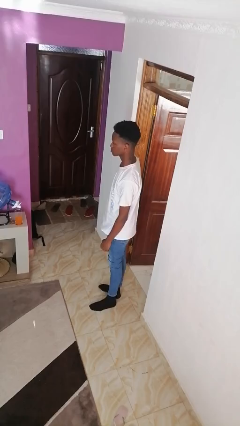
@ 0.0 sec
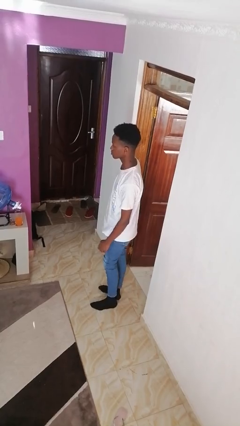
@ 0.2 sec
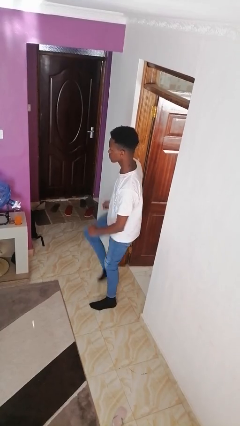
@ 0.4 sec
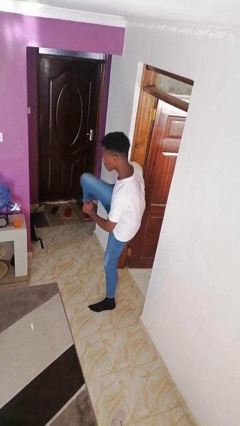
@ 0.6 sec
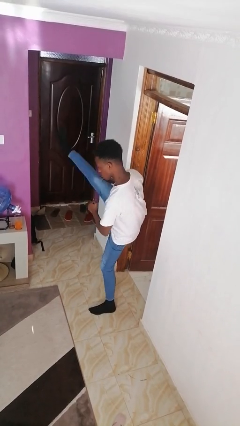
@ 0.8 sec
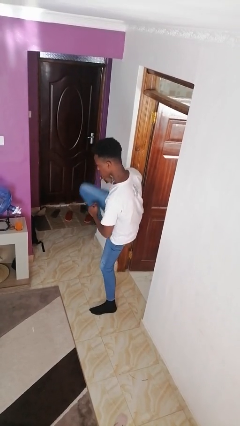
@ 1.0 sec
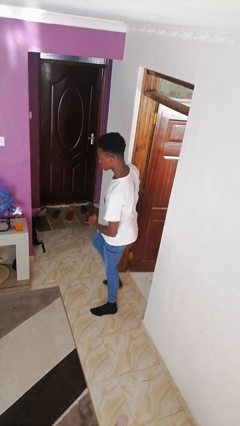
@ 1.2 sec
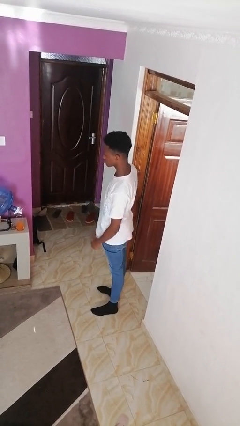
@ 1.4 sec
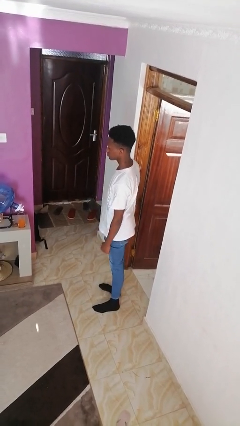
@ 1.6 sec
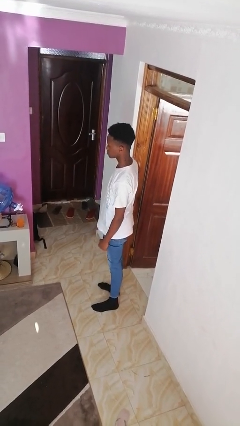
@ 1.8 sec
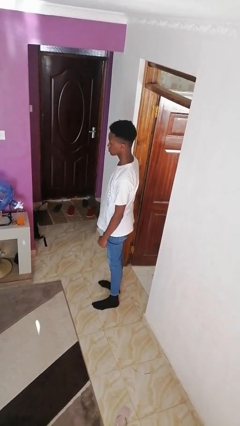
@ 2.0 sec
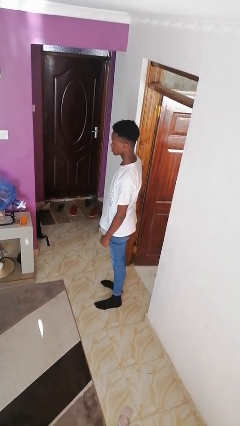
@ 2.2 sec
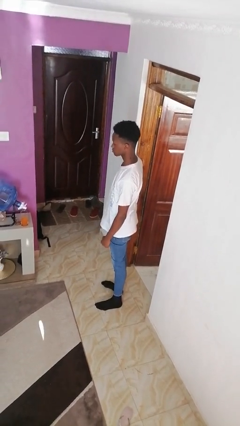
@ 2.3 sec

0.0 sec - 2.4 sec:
person karate kicks

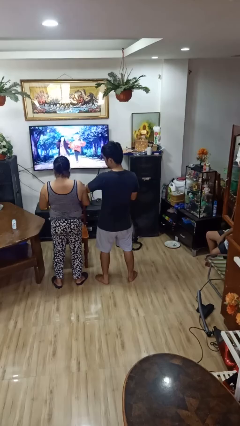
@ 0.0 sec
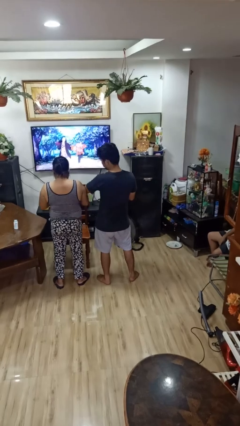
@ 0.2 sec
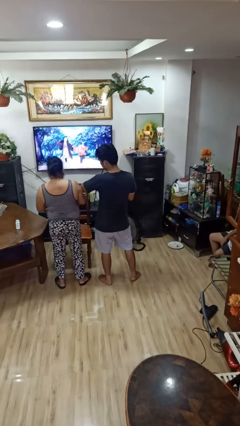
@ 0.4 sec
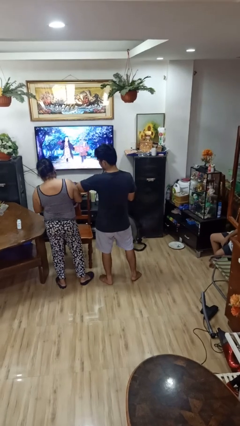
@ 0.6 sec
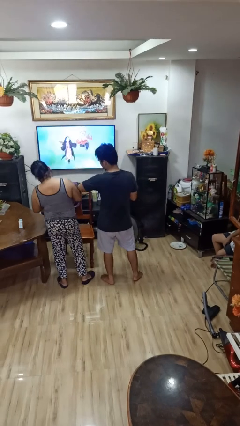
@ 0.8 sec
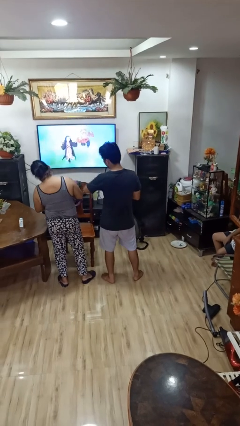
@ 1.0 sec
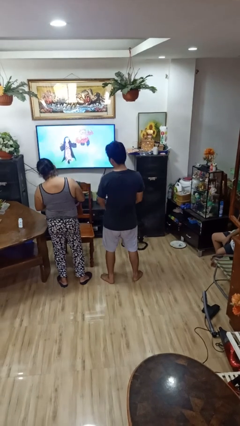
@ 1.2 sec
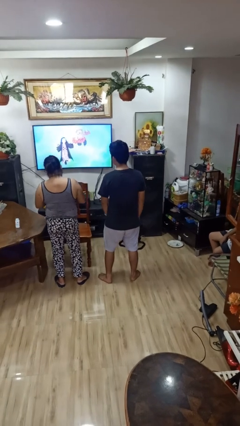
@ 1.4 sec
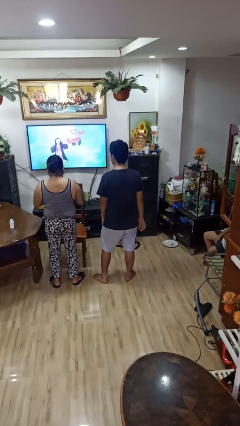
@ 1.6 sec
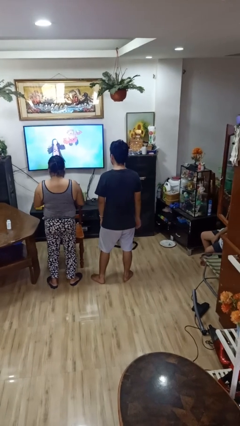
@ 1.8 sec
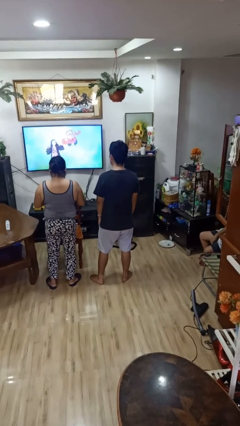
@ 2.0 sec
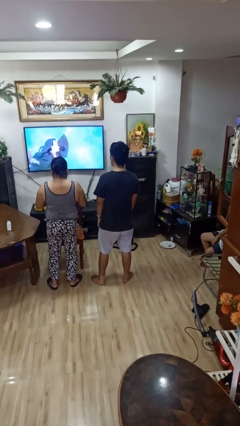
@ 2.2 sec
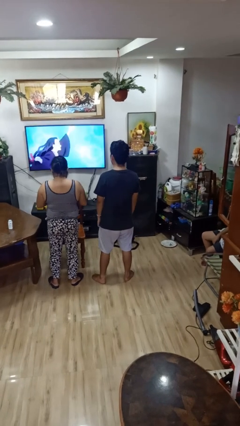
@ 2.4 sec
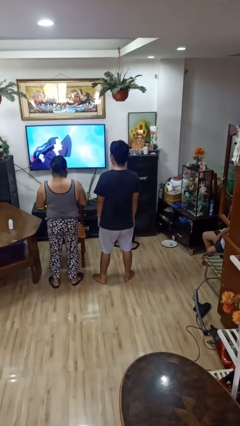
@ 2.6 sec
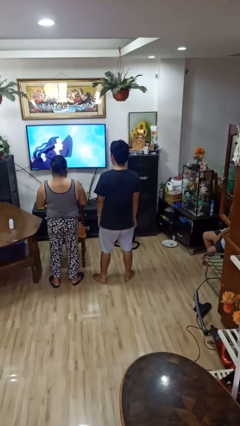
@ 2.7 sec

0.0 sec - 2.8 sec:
person shoves person

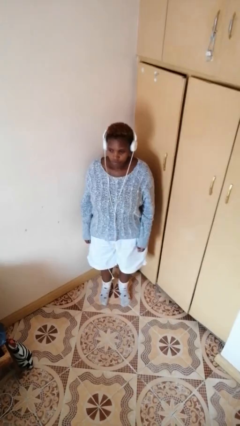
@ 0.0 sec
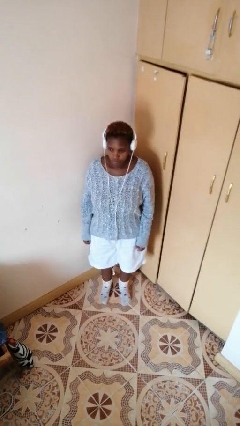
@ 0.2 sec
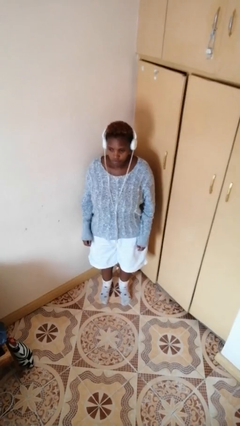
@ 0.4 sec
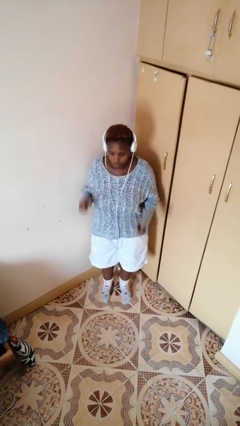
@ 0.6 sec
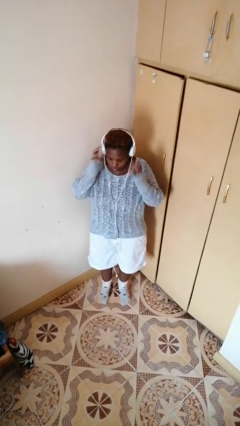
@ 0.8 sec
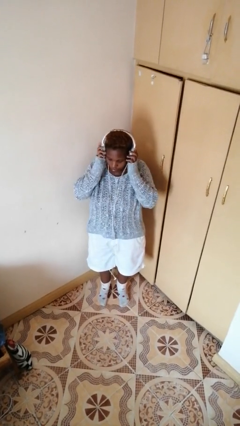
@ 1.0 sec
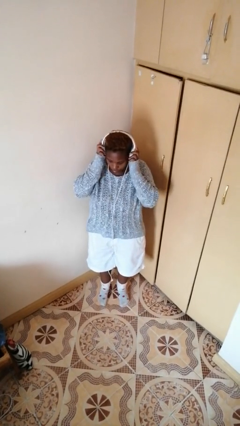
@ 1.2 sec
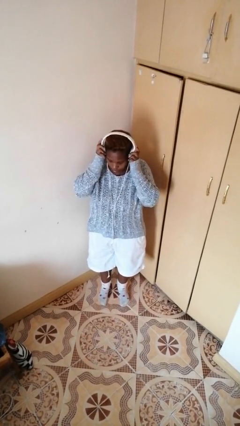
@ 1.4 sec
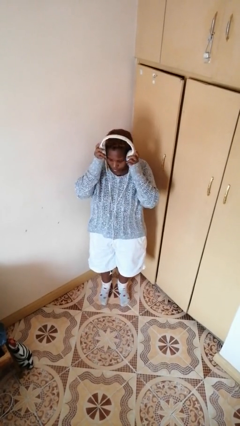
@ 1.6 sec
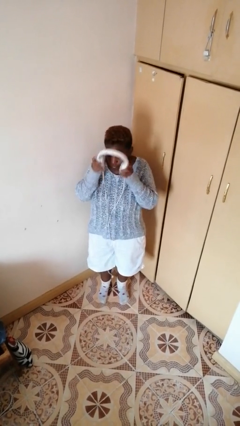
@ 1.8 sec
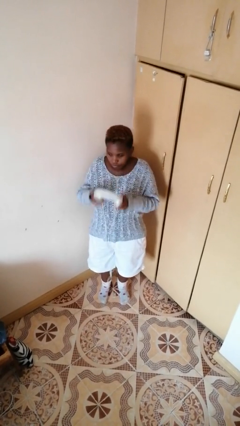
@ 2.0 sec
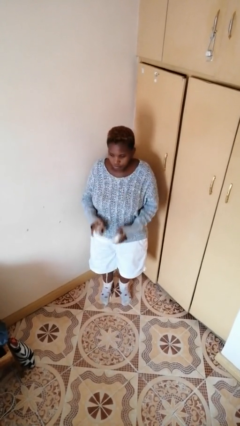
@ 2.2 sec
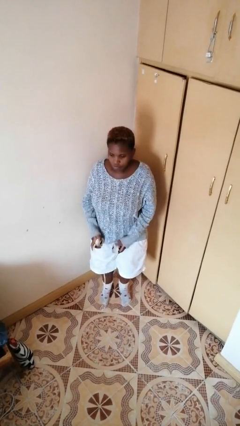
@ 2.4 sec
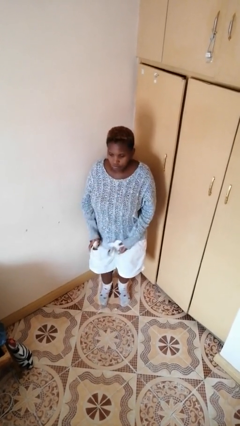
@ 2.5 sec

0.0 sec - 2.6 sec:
person takes off headphones

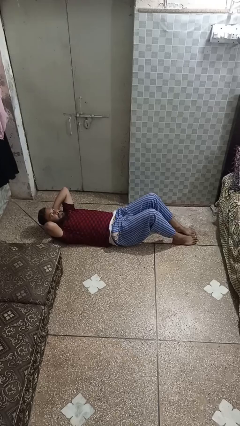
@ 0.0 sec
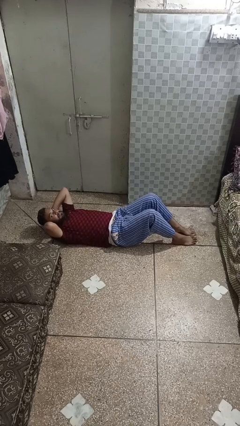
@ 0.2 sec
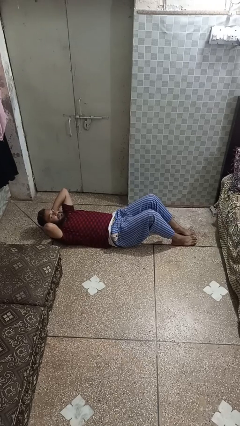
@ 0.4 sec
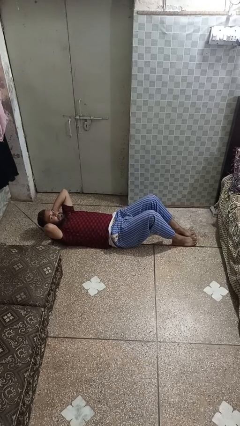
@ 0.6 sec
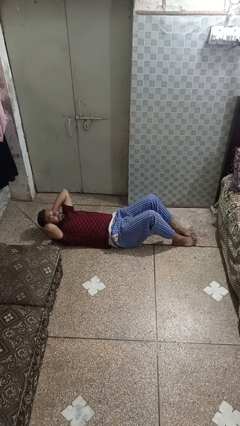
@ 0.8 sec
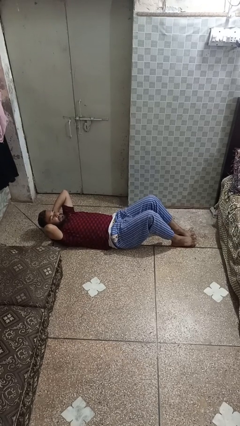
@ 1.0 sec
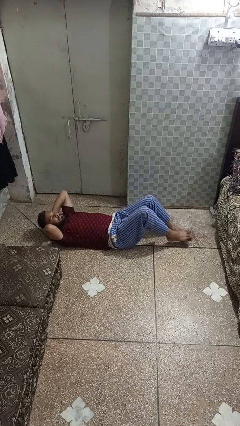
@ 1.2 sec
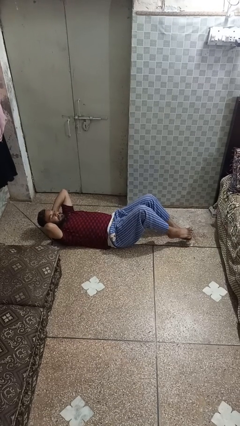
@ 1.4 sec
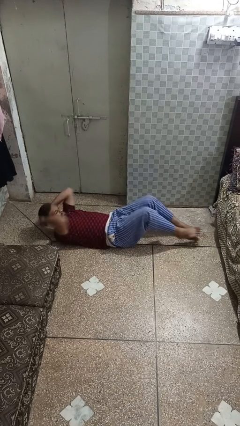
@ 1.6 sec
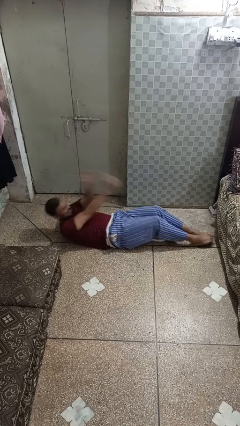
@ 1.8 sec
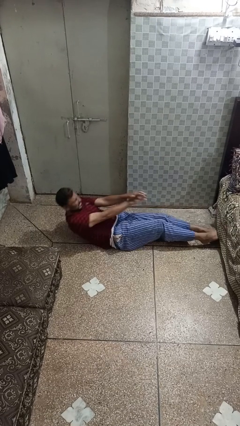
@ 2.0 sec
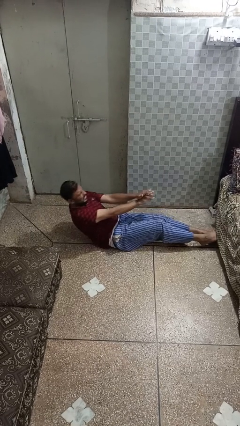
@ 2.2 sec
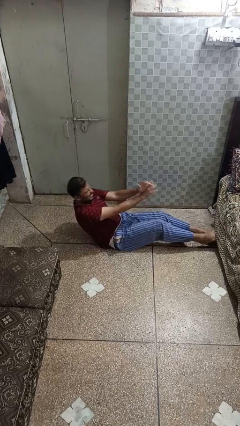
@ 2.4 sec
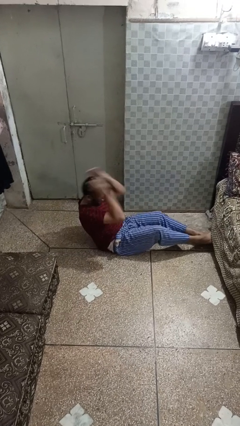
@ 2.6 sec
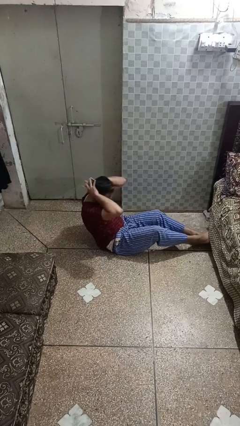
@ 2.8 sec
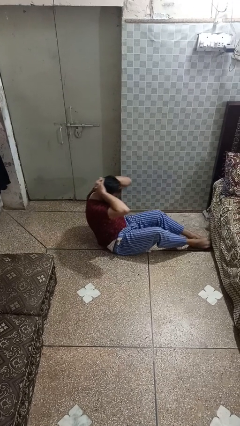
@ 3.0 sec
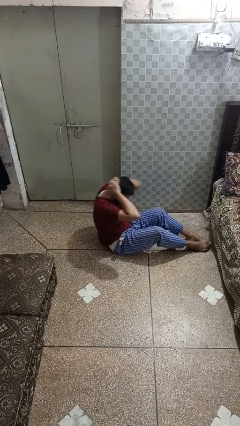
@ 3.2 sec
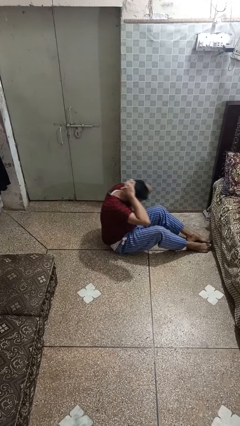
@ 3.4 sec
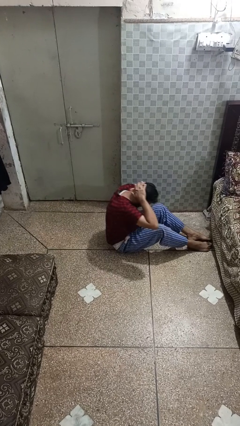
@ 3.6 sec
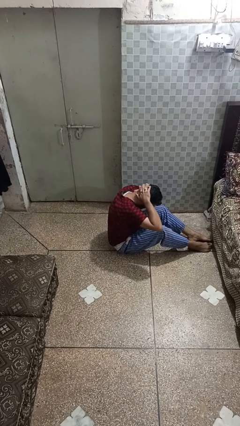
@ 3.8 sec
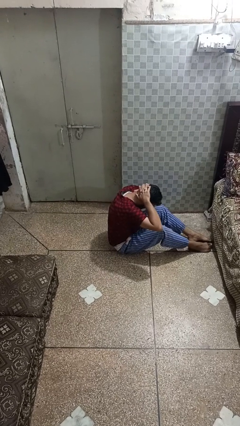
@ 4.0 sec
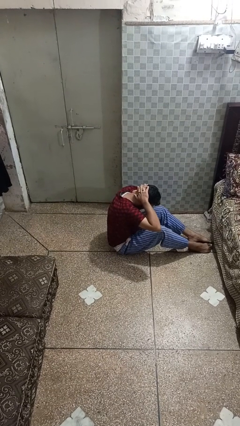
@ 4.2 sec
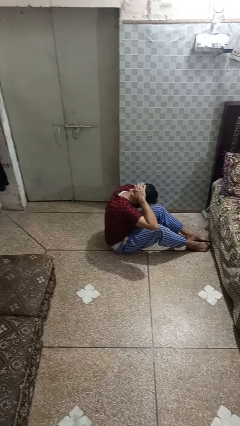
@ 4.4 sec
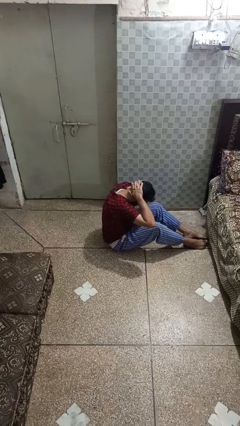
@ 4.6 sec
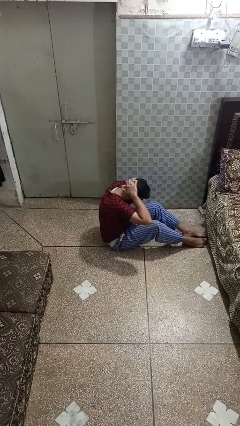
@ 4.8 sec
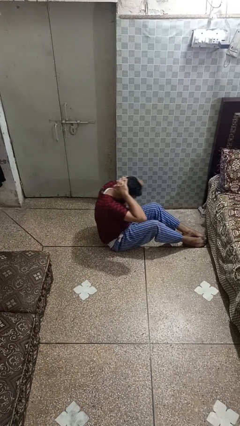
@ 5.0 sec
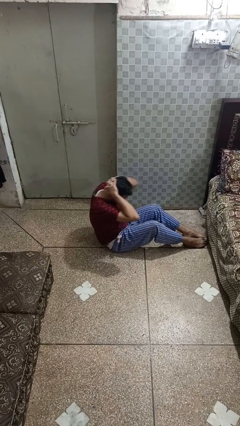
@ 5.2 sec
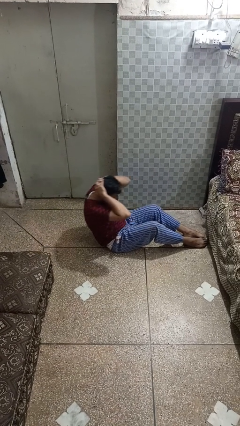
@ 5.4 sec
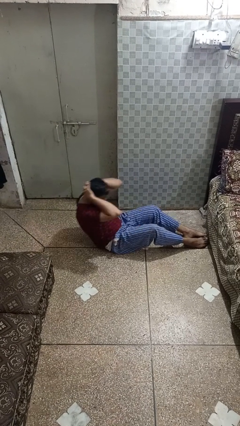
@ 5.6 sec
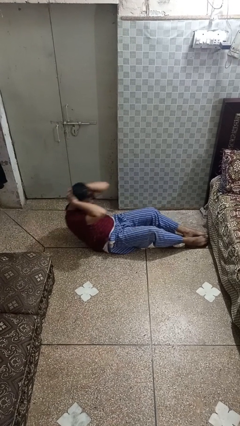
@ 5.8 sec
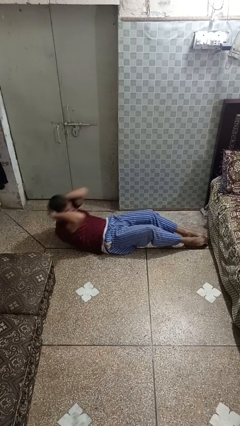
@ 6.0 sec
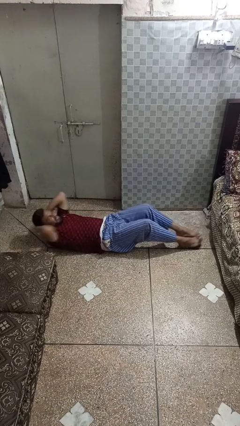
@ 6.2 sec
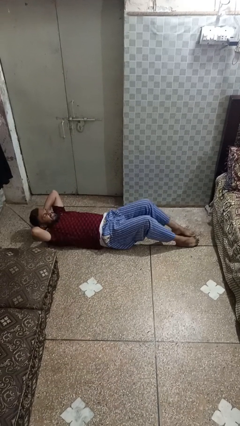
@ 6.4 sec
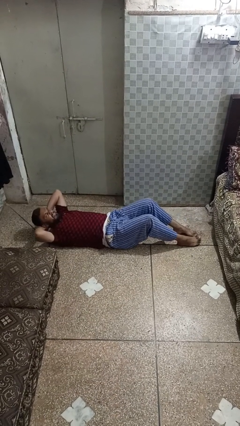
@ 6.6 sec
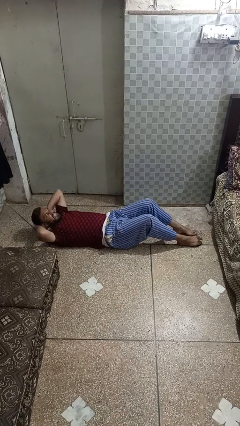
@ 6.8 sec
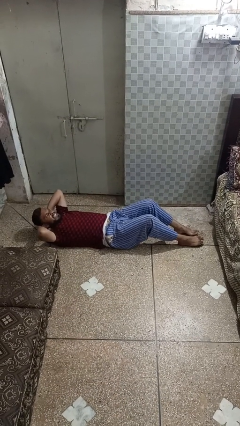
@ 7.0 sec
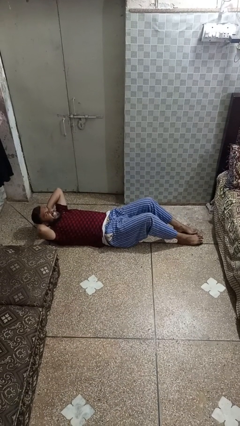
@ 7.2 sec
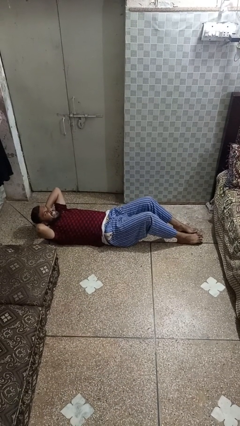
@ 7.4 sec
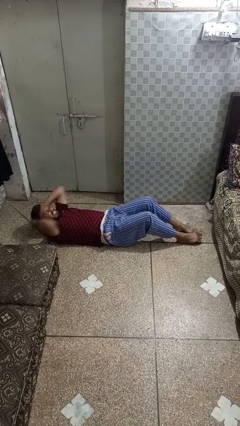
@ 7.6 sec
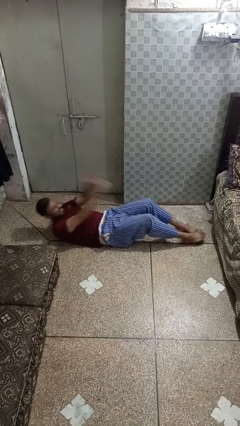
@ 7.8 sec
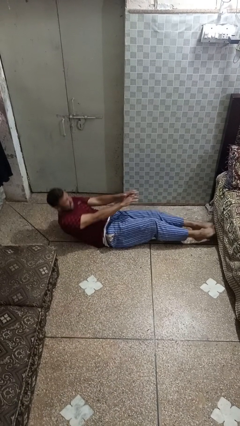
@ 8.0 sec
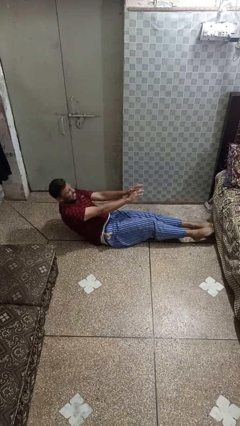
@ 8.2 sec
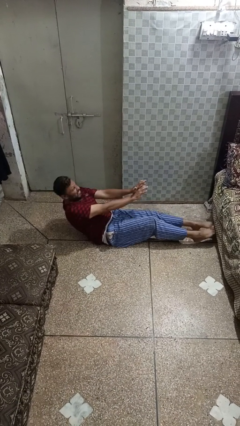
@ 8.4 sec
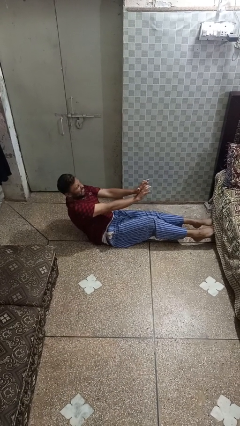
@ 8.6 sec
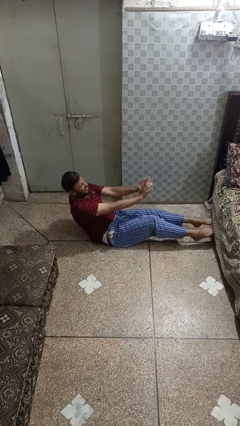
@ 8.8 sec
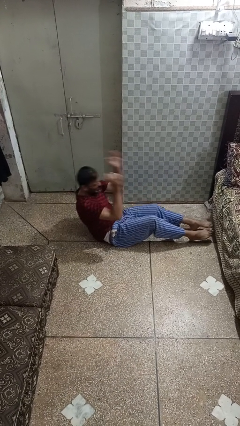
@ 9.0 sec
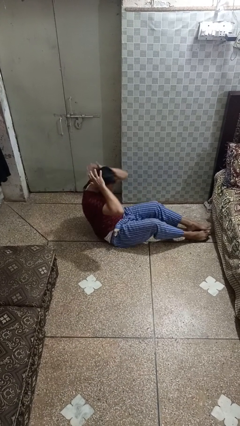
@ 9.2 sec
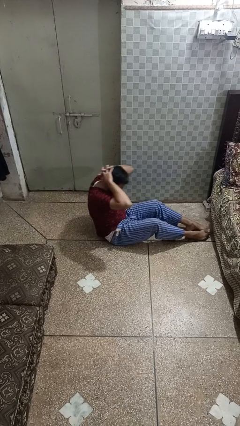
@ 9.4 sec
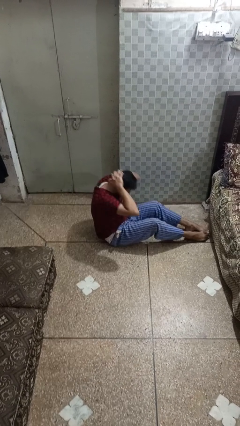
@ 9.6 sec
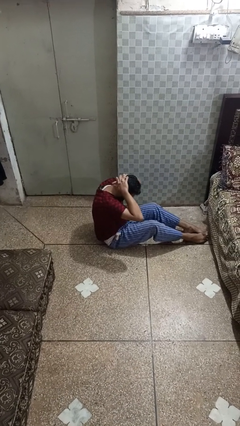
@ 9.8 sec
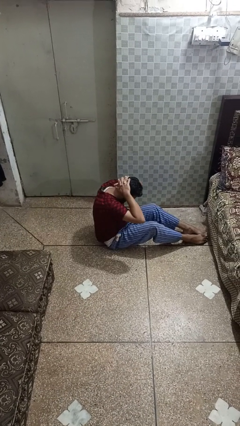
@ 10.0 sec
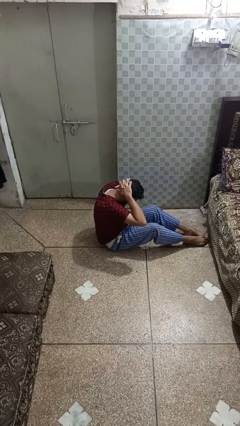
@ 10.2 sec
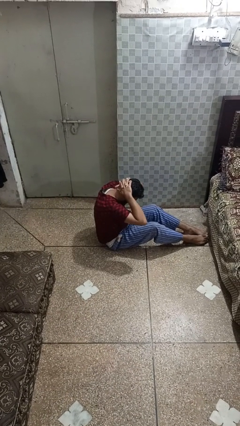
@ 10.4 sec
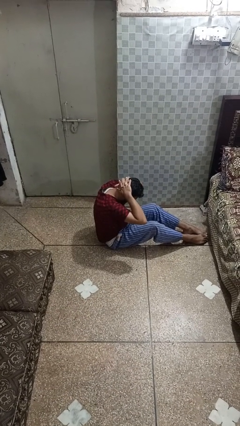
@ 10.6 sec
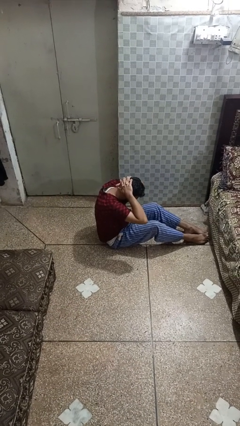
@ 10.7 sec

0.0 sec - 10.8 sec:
person exercises with situp
